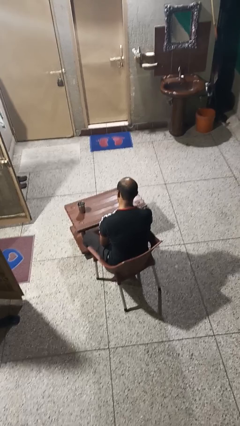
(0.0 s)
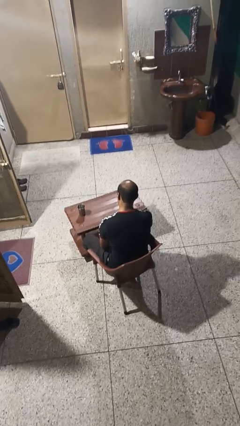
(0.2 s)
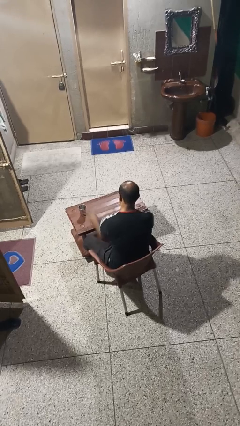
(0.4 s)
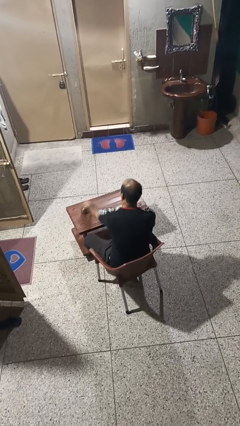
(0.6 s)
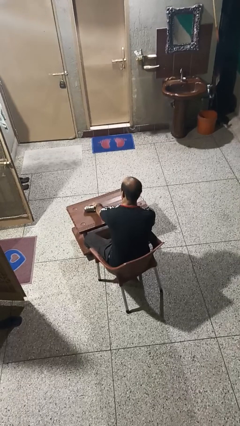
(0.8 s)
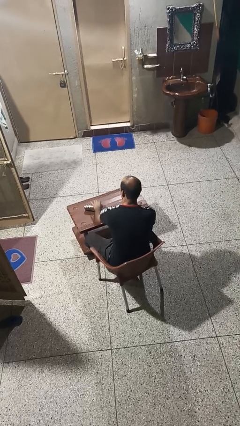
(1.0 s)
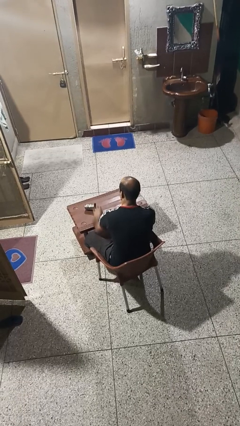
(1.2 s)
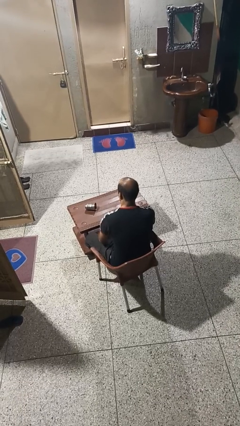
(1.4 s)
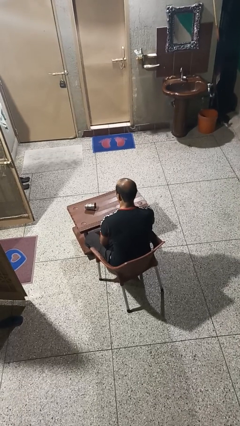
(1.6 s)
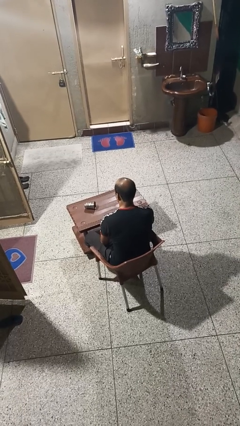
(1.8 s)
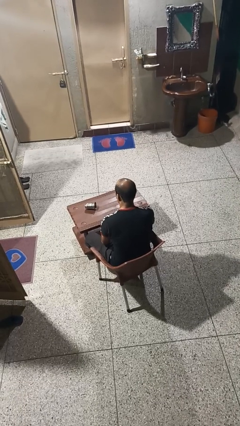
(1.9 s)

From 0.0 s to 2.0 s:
person knocks over glass

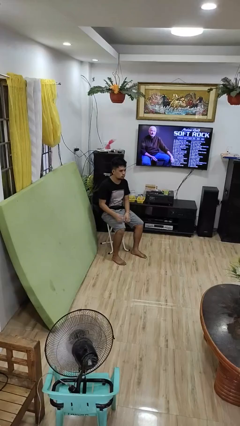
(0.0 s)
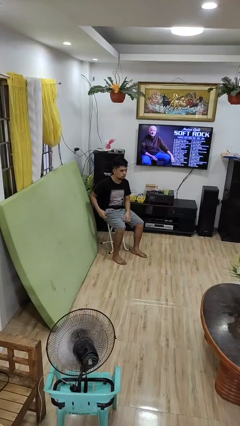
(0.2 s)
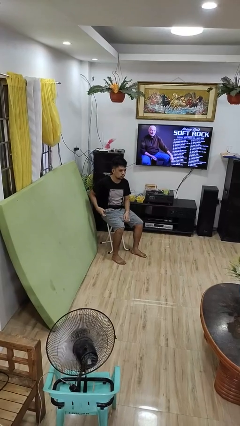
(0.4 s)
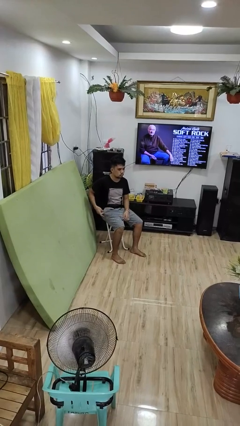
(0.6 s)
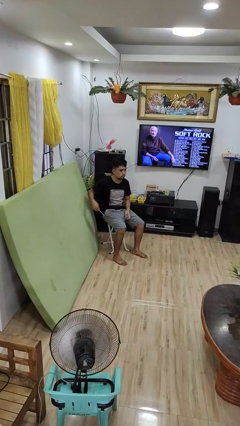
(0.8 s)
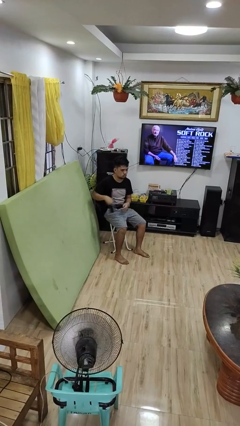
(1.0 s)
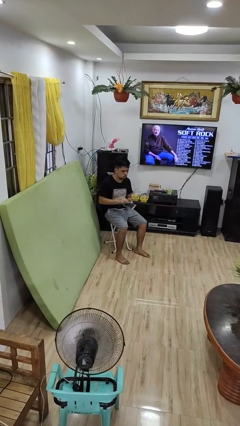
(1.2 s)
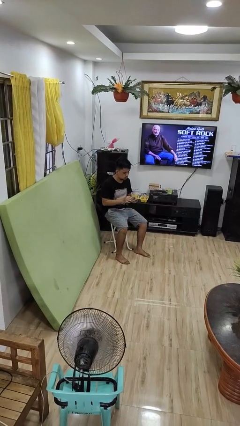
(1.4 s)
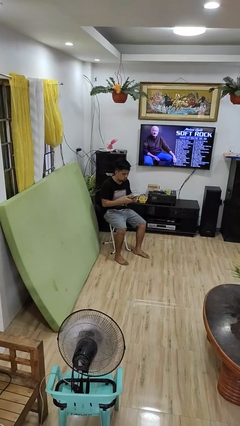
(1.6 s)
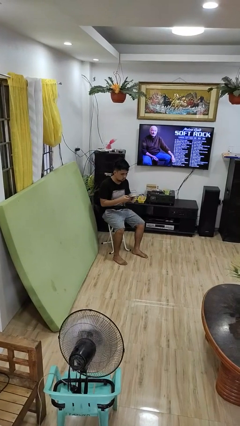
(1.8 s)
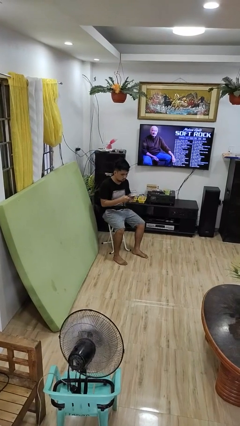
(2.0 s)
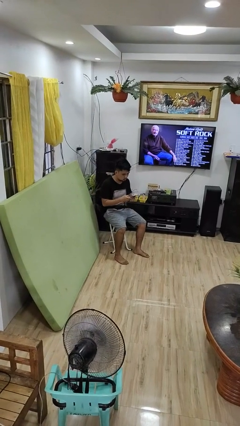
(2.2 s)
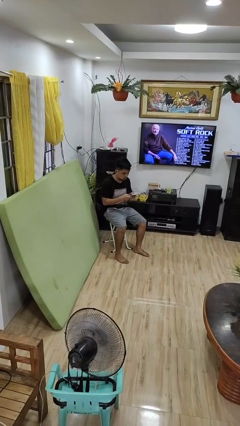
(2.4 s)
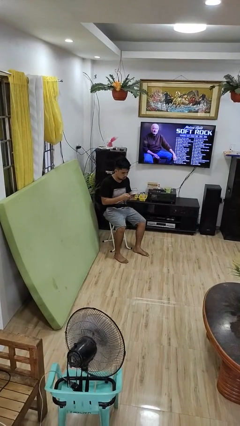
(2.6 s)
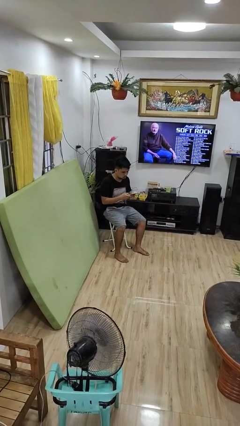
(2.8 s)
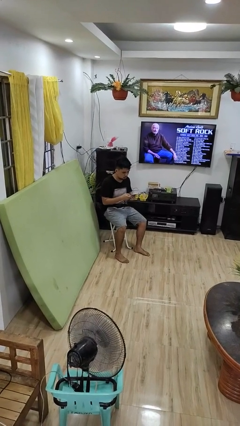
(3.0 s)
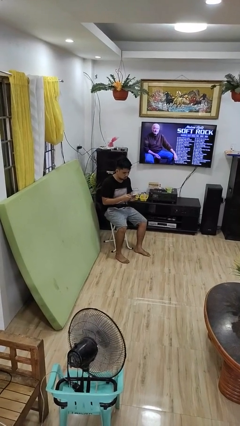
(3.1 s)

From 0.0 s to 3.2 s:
person takes phone from pocket

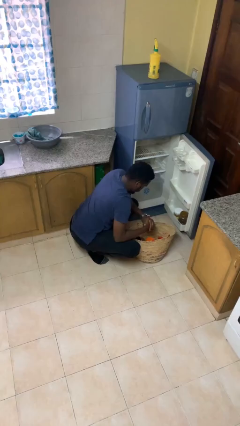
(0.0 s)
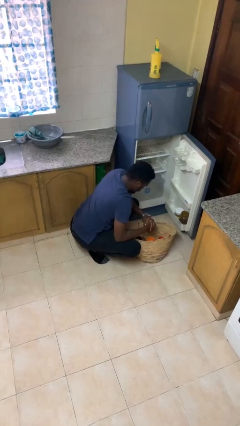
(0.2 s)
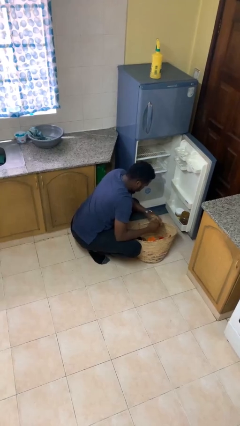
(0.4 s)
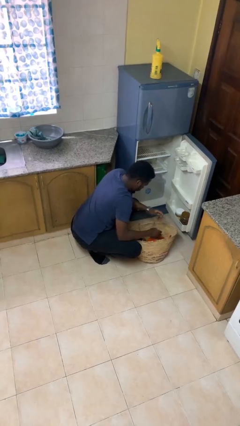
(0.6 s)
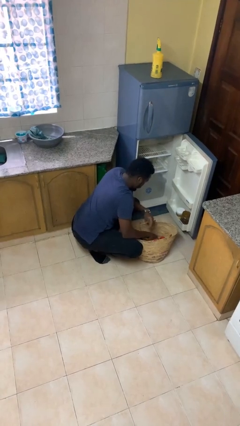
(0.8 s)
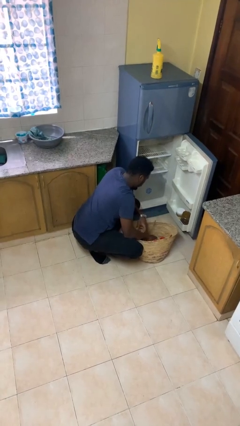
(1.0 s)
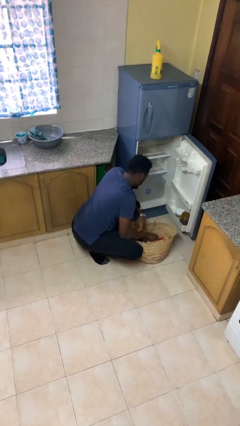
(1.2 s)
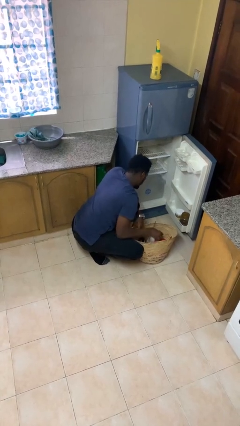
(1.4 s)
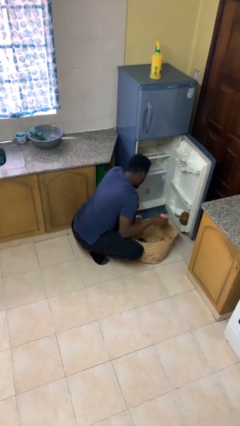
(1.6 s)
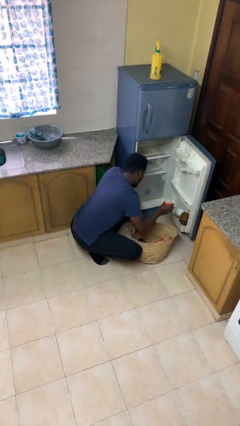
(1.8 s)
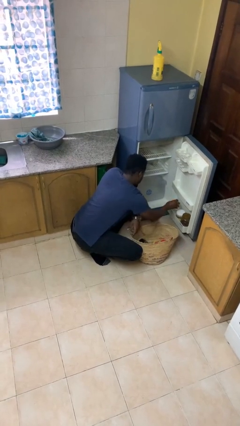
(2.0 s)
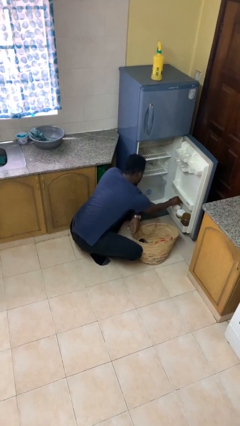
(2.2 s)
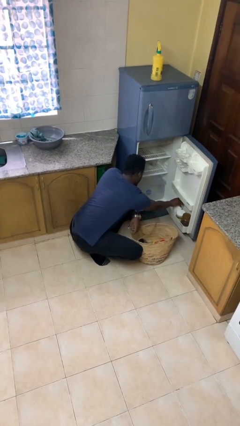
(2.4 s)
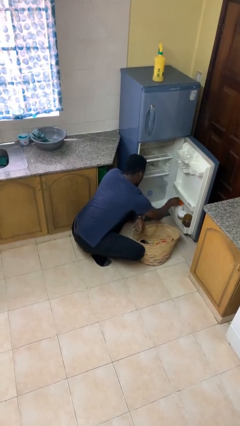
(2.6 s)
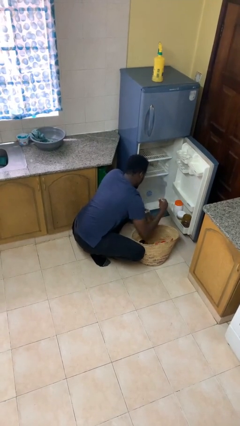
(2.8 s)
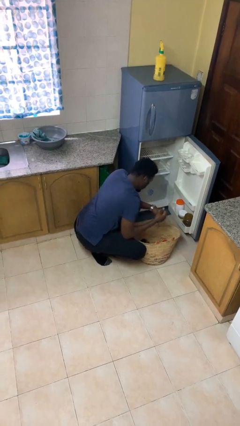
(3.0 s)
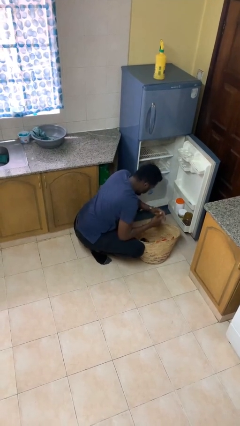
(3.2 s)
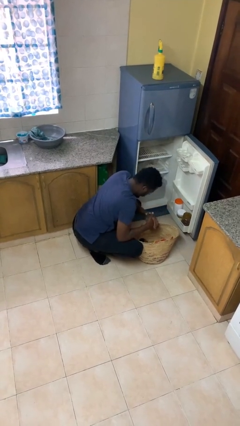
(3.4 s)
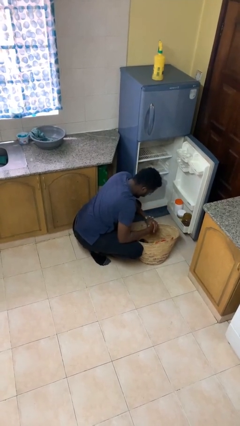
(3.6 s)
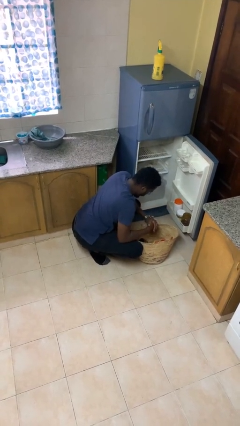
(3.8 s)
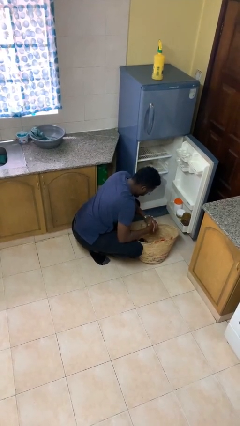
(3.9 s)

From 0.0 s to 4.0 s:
person loads groceries into refrigerator

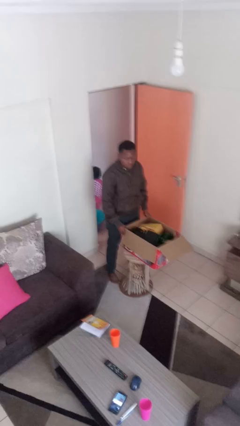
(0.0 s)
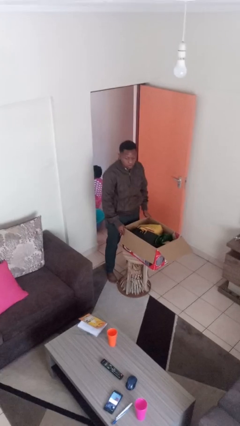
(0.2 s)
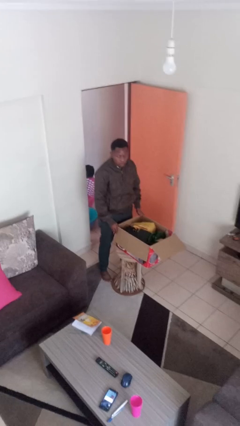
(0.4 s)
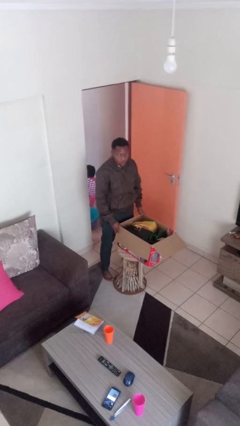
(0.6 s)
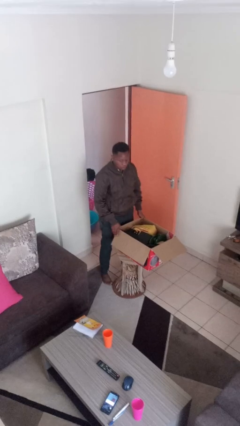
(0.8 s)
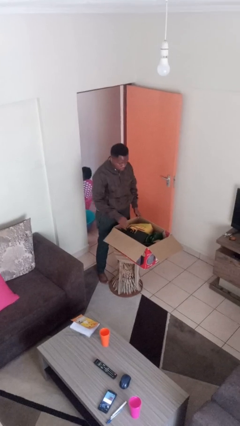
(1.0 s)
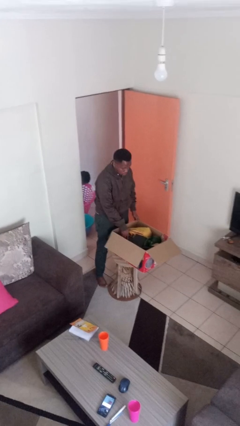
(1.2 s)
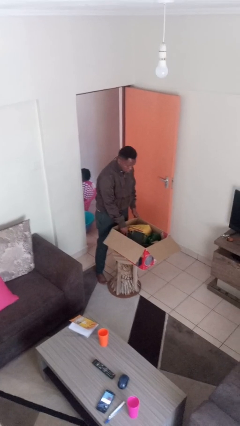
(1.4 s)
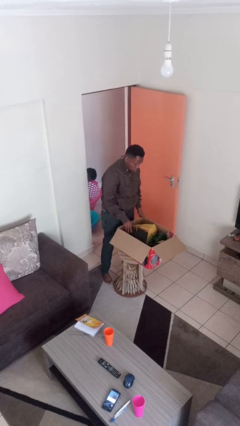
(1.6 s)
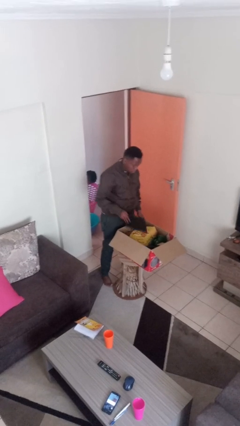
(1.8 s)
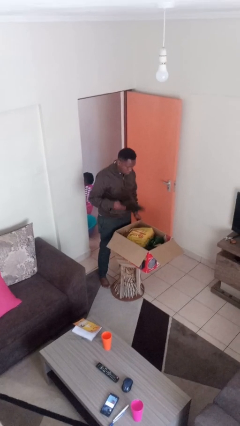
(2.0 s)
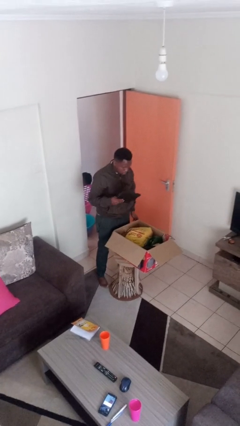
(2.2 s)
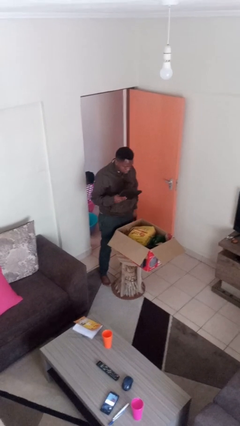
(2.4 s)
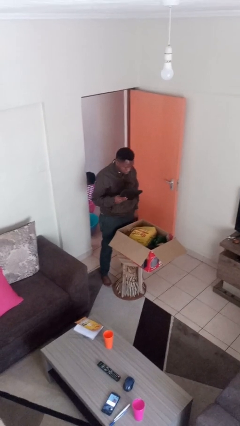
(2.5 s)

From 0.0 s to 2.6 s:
person takes object from box

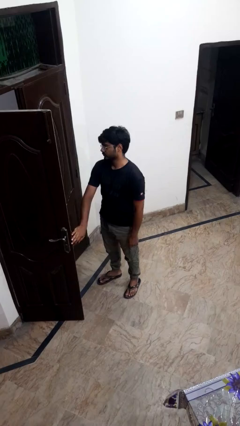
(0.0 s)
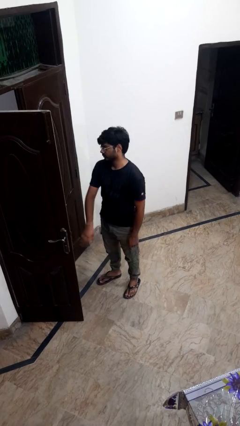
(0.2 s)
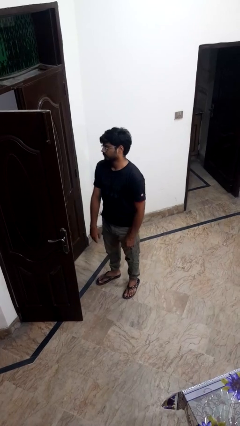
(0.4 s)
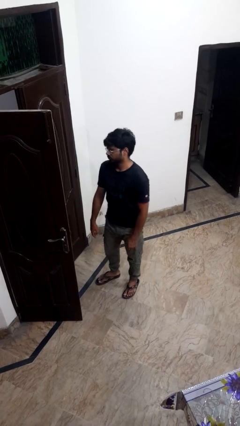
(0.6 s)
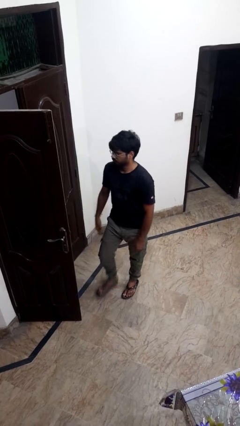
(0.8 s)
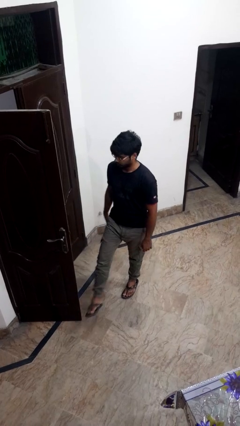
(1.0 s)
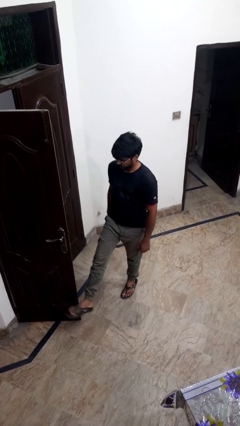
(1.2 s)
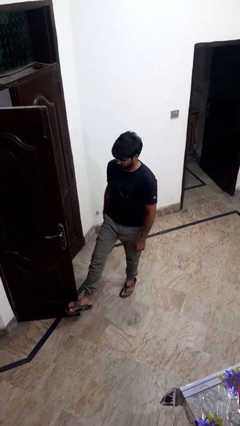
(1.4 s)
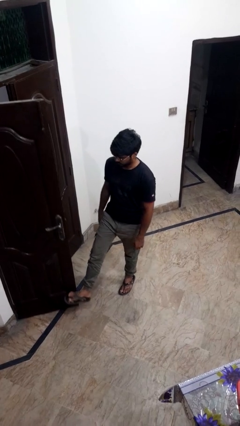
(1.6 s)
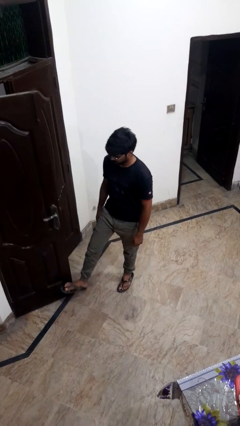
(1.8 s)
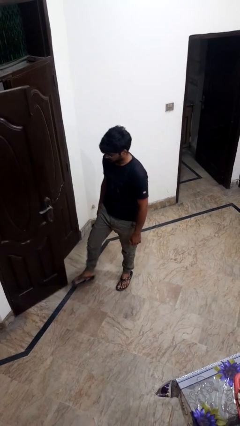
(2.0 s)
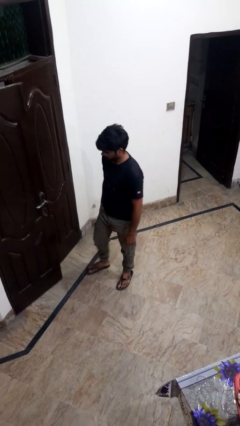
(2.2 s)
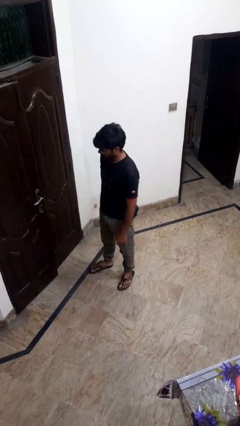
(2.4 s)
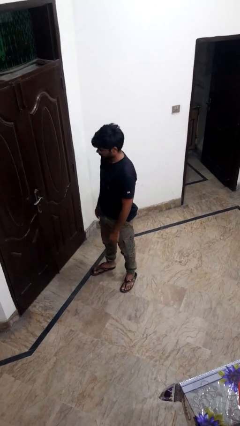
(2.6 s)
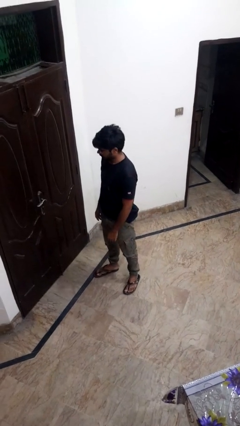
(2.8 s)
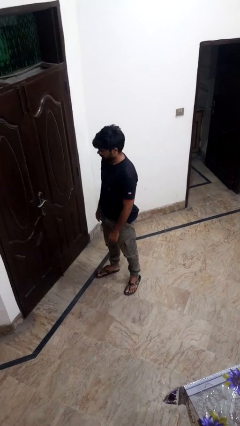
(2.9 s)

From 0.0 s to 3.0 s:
person closes door with foot

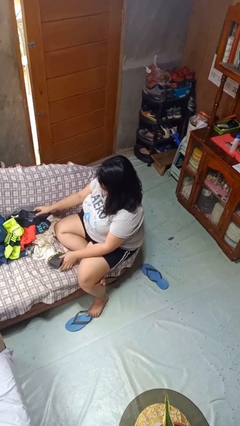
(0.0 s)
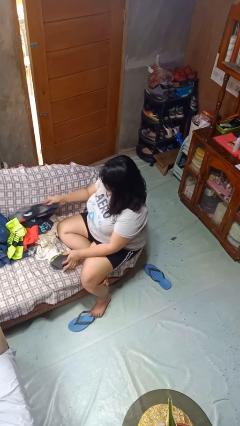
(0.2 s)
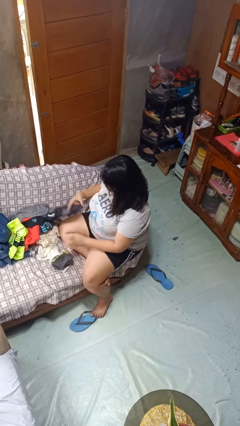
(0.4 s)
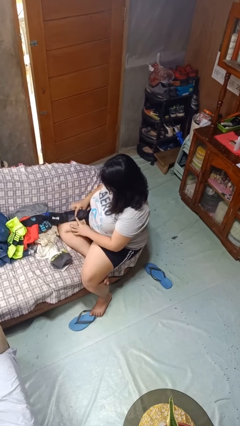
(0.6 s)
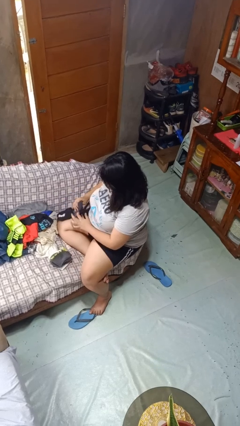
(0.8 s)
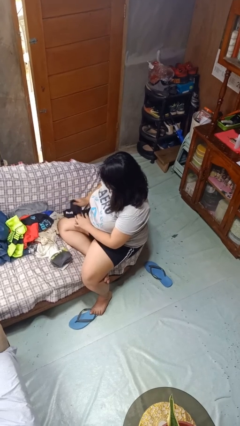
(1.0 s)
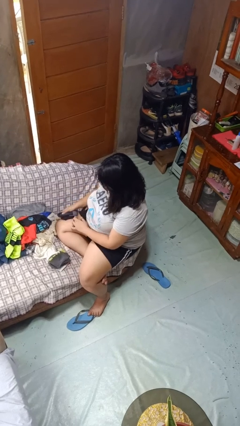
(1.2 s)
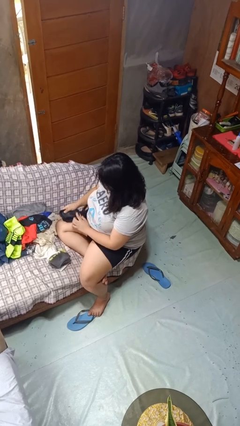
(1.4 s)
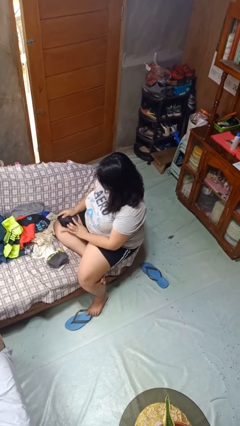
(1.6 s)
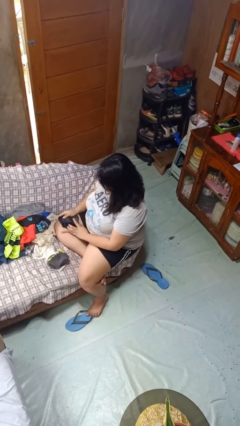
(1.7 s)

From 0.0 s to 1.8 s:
person folds socks

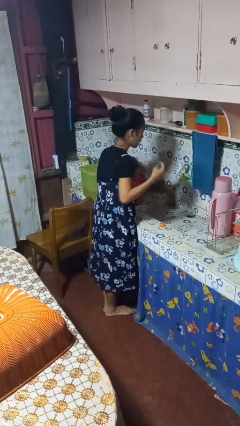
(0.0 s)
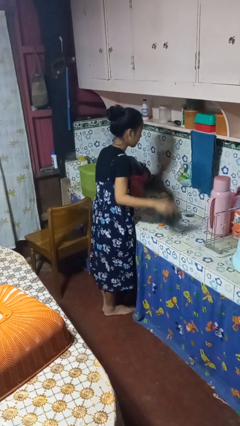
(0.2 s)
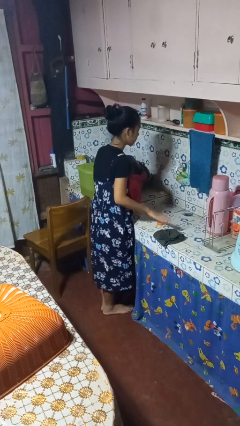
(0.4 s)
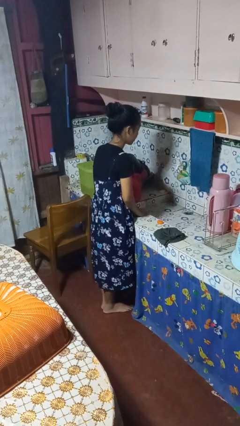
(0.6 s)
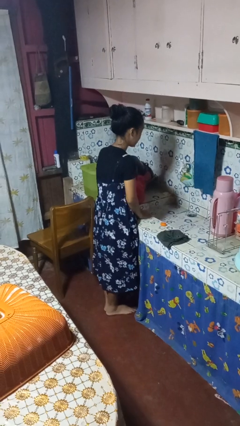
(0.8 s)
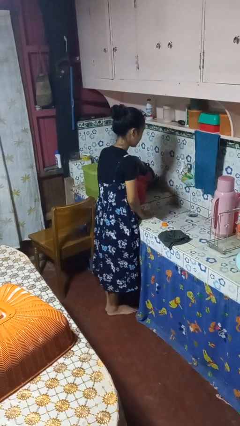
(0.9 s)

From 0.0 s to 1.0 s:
person dries face with towel
